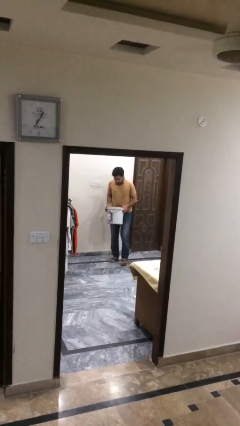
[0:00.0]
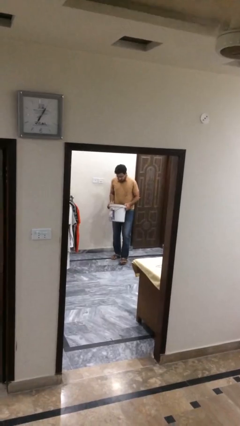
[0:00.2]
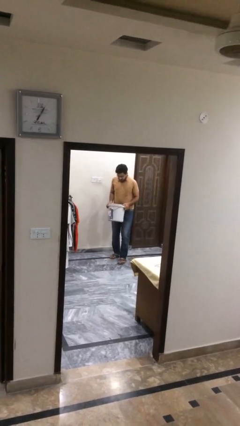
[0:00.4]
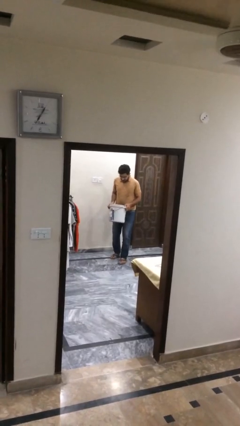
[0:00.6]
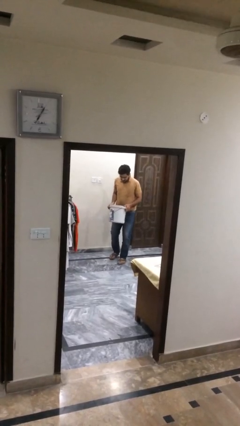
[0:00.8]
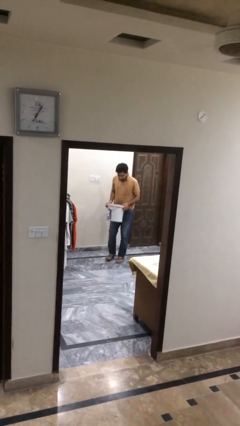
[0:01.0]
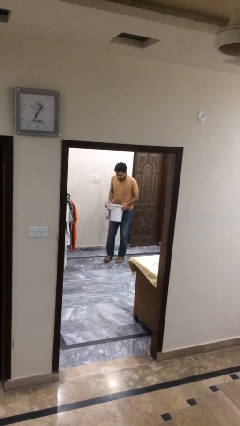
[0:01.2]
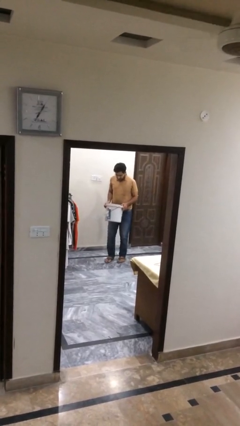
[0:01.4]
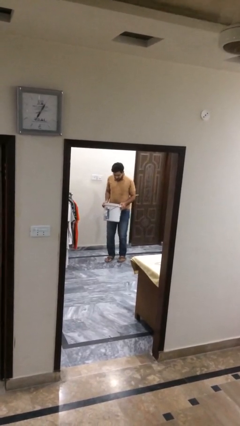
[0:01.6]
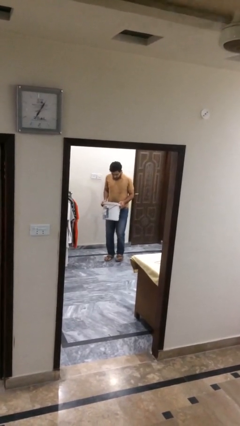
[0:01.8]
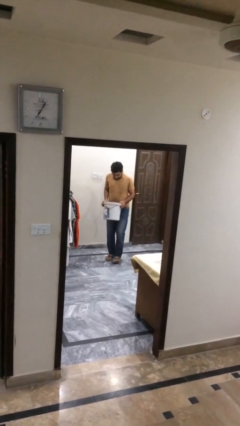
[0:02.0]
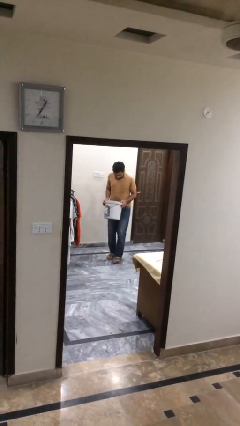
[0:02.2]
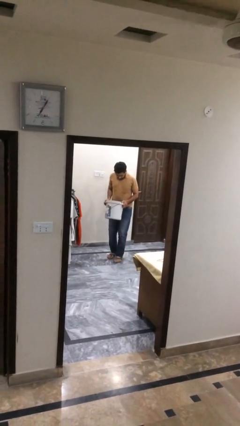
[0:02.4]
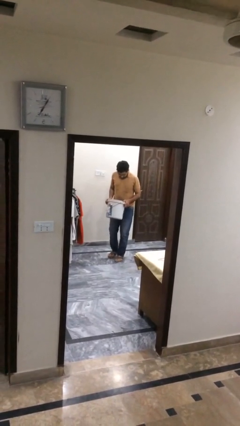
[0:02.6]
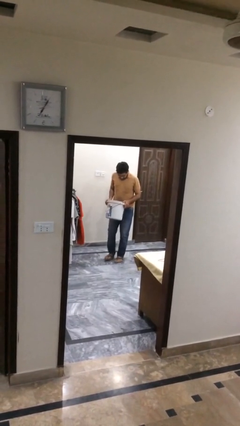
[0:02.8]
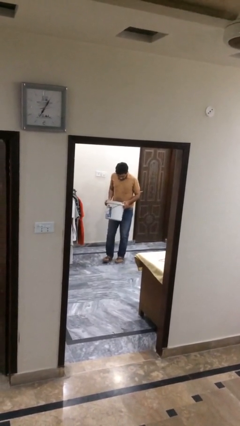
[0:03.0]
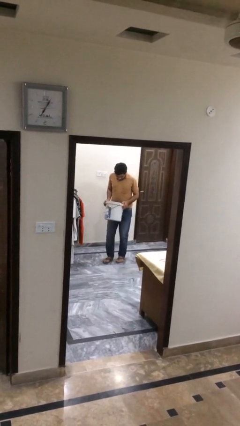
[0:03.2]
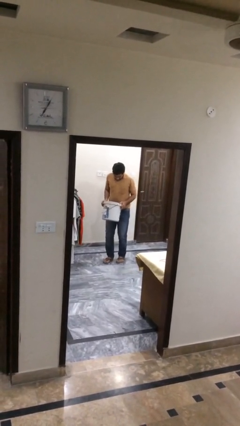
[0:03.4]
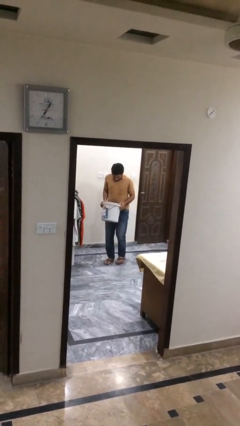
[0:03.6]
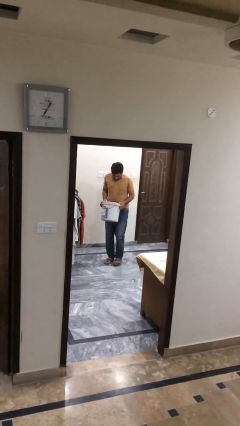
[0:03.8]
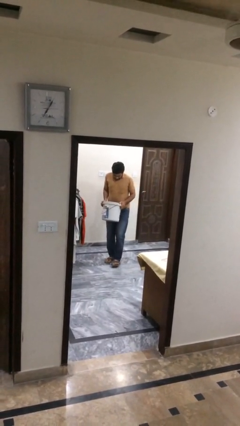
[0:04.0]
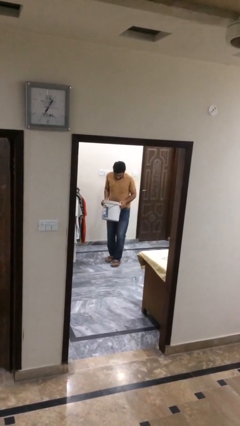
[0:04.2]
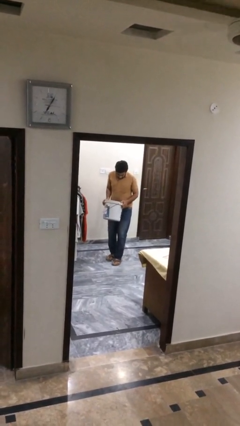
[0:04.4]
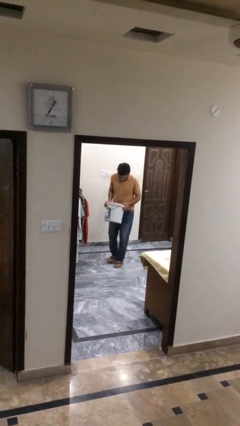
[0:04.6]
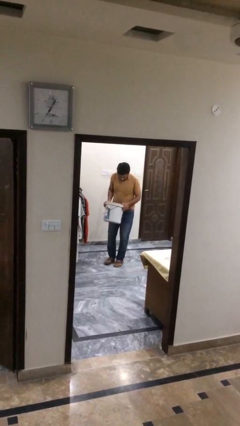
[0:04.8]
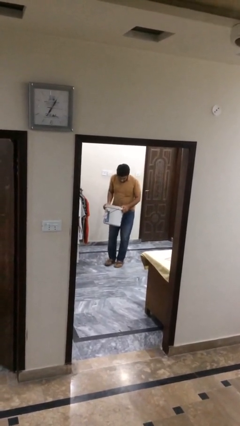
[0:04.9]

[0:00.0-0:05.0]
person carries heavy object

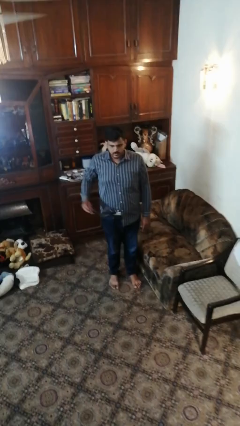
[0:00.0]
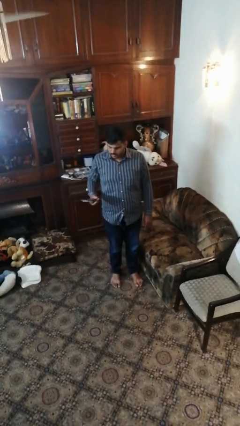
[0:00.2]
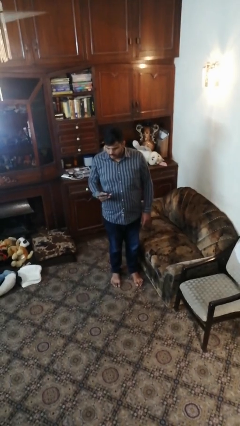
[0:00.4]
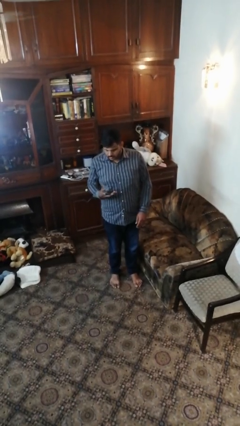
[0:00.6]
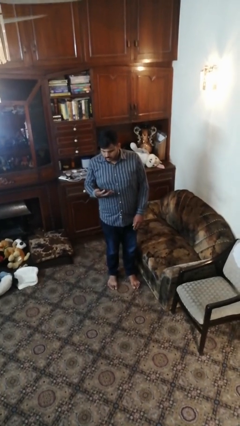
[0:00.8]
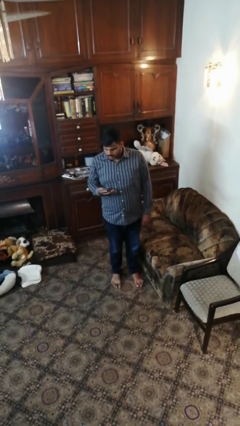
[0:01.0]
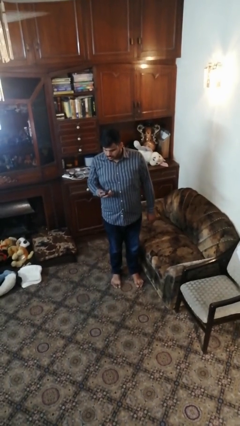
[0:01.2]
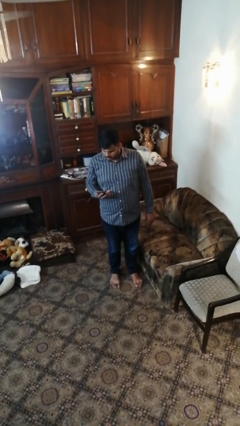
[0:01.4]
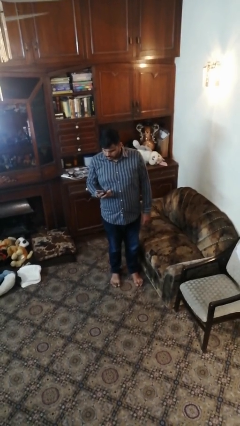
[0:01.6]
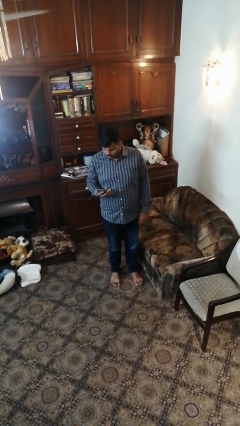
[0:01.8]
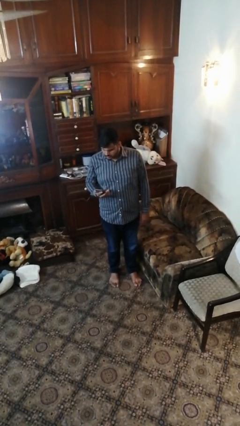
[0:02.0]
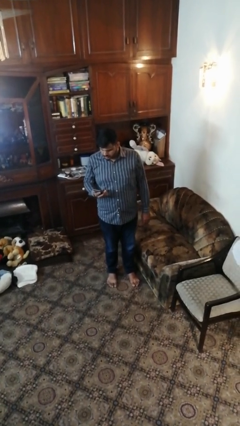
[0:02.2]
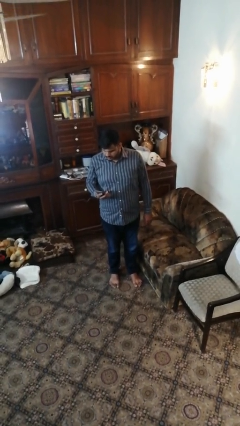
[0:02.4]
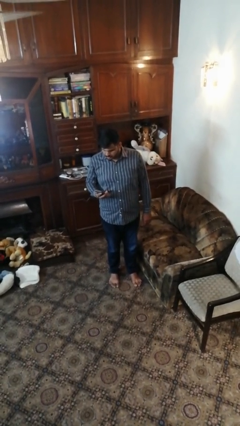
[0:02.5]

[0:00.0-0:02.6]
person takes phone from pocket

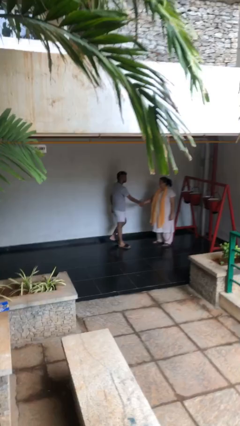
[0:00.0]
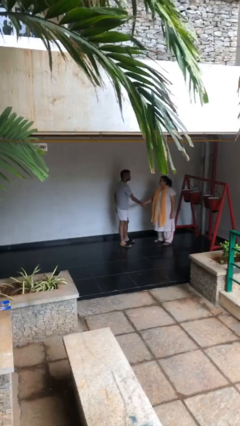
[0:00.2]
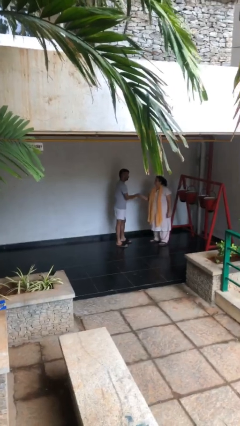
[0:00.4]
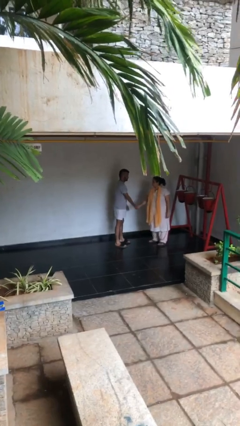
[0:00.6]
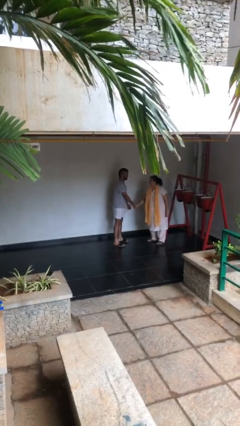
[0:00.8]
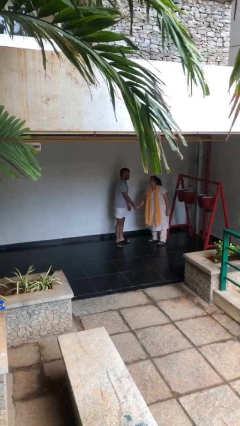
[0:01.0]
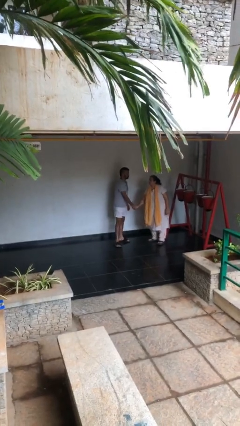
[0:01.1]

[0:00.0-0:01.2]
person shakes hand

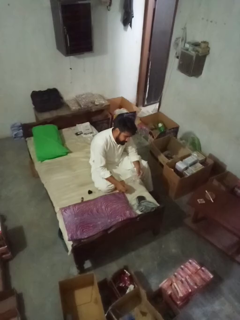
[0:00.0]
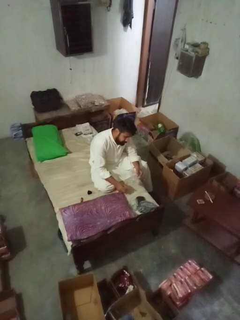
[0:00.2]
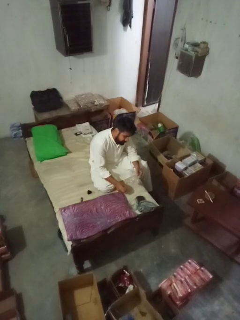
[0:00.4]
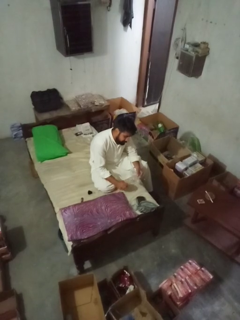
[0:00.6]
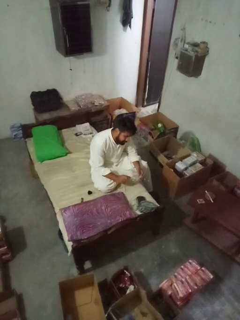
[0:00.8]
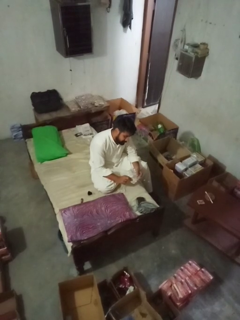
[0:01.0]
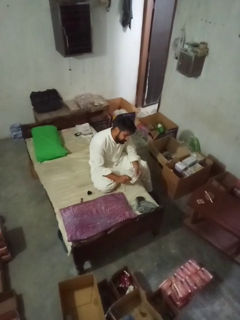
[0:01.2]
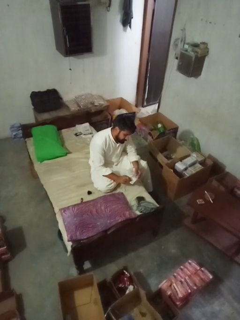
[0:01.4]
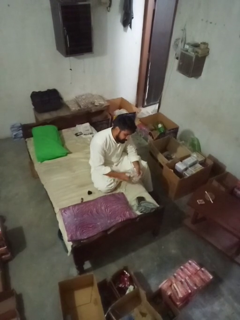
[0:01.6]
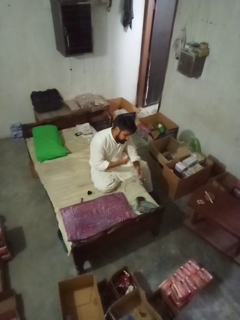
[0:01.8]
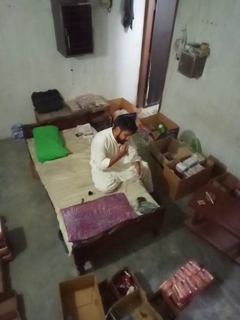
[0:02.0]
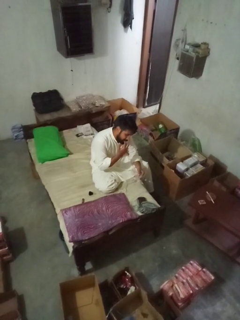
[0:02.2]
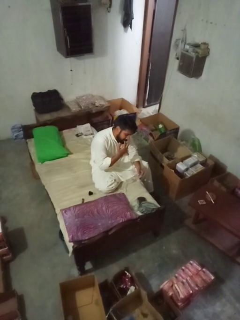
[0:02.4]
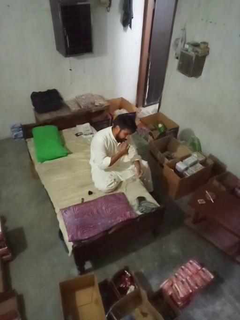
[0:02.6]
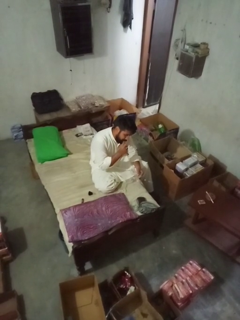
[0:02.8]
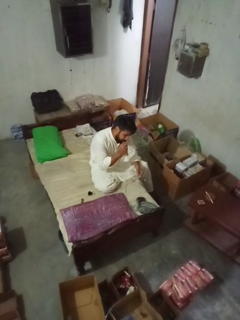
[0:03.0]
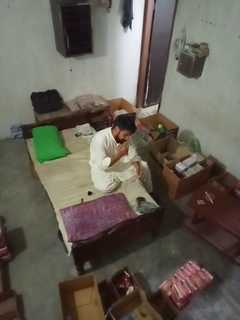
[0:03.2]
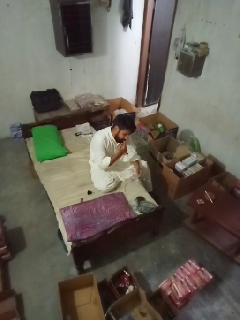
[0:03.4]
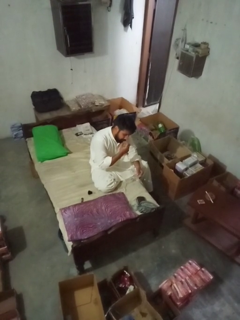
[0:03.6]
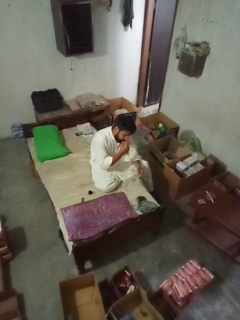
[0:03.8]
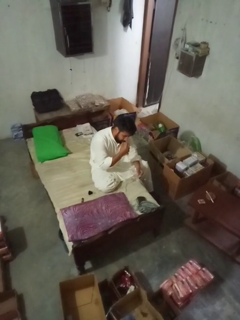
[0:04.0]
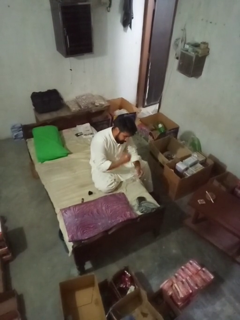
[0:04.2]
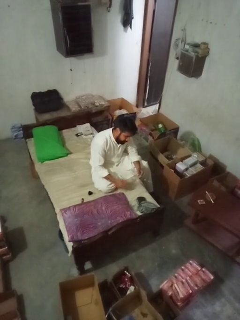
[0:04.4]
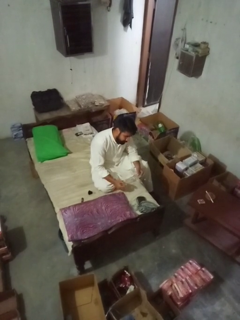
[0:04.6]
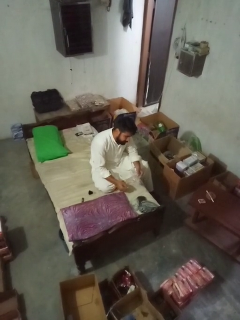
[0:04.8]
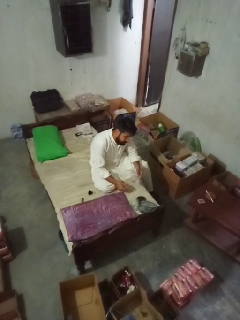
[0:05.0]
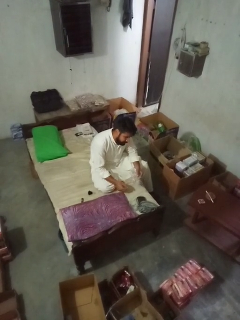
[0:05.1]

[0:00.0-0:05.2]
person licks fingers

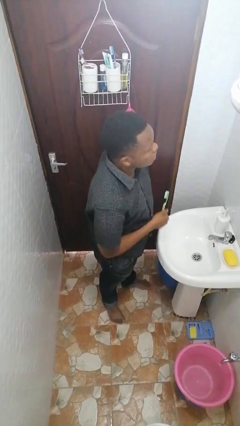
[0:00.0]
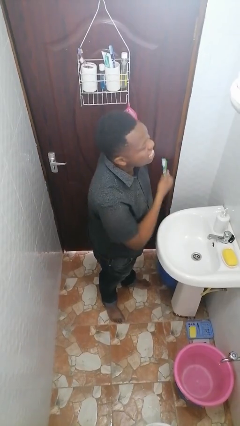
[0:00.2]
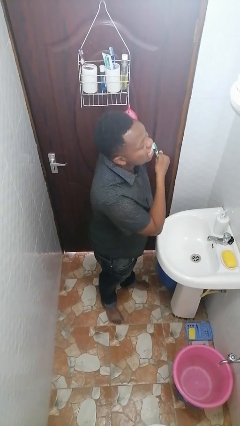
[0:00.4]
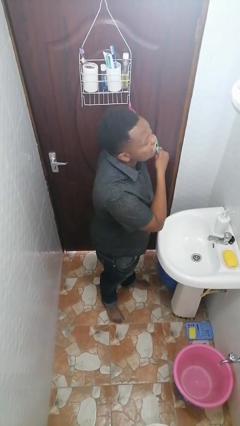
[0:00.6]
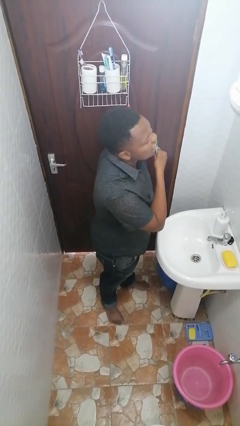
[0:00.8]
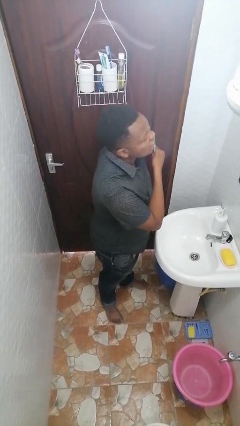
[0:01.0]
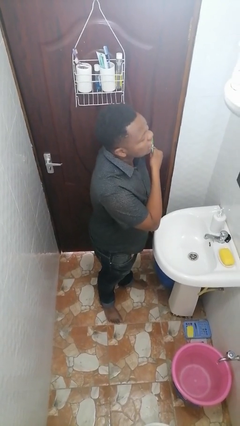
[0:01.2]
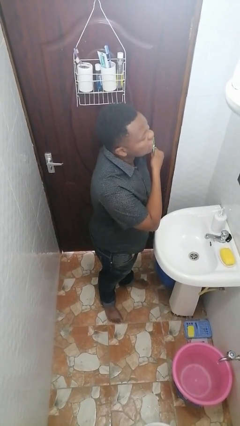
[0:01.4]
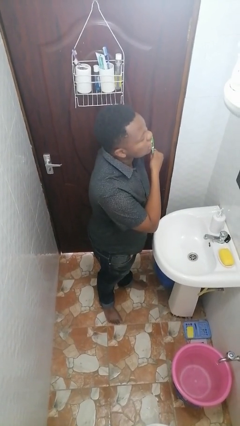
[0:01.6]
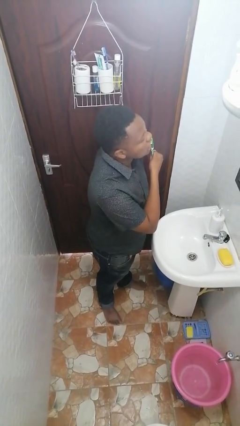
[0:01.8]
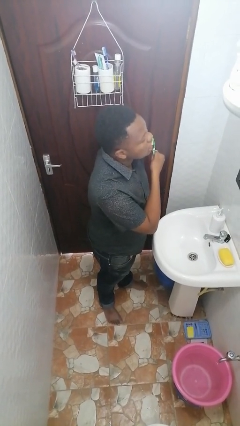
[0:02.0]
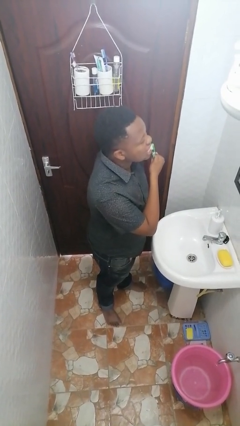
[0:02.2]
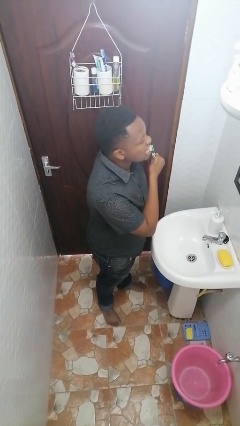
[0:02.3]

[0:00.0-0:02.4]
person brushes teeth

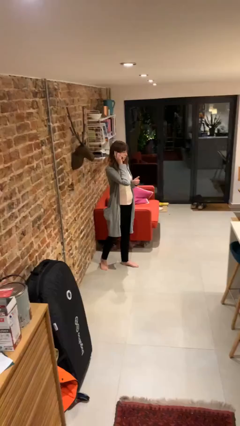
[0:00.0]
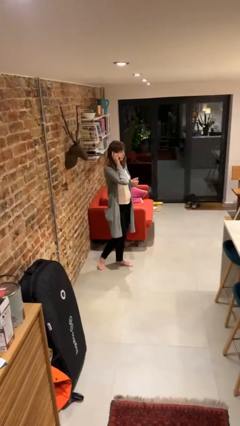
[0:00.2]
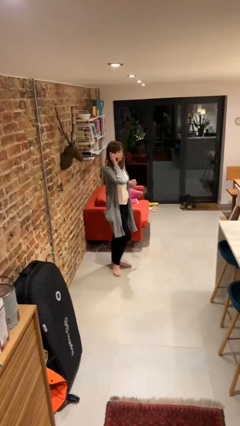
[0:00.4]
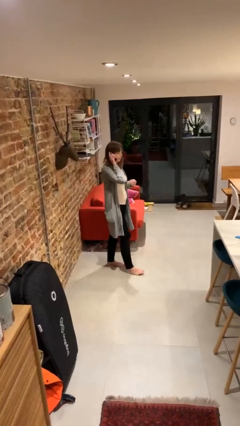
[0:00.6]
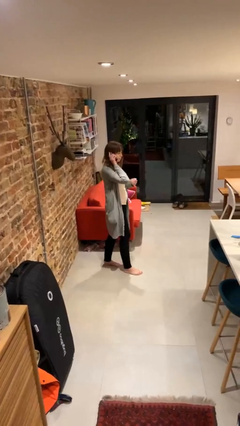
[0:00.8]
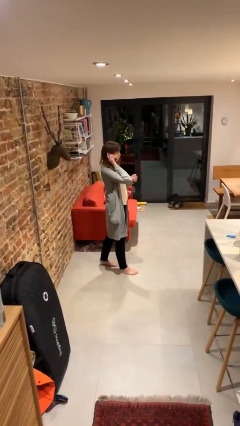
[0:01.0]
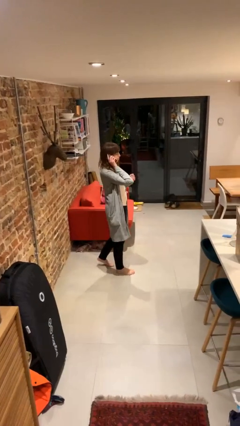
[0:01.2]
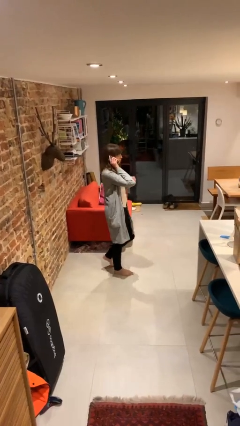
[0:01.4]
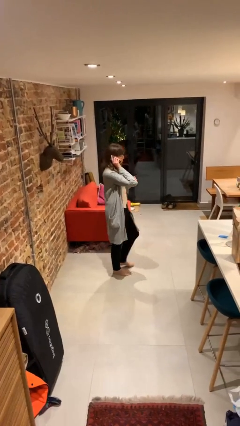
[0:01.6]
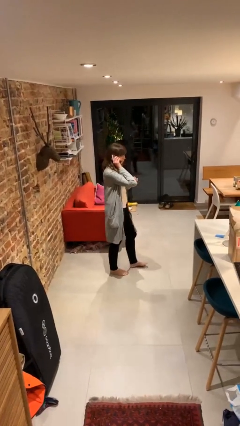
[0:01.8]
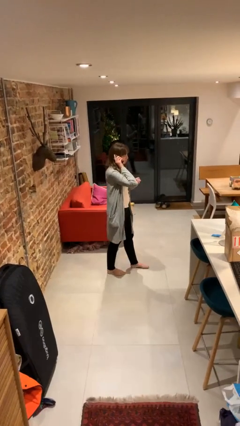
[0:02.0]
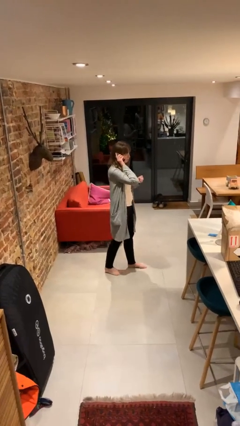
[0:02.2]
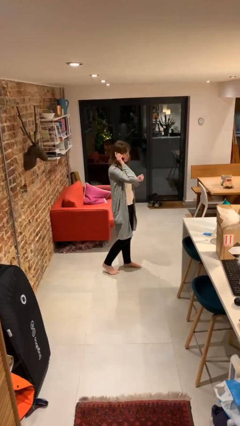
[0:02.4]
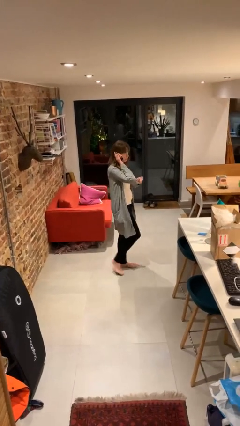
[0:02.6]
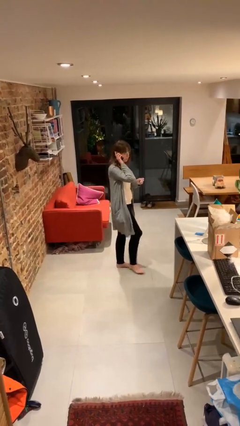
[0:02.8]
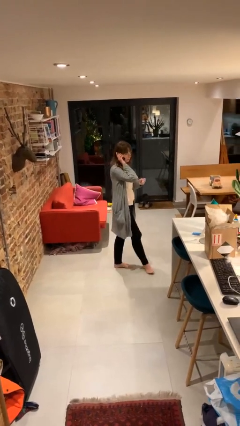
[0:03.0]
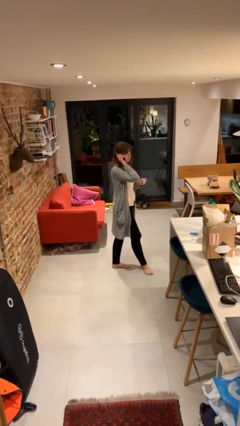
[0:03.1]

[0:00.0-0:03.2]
person talks on phone
